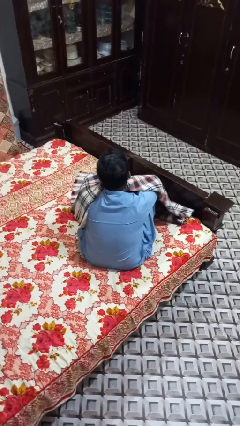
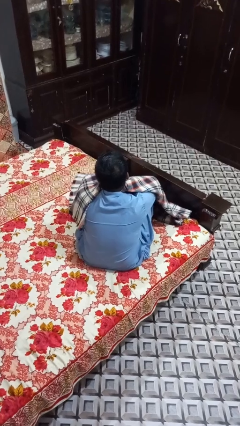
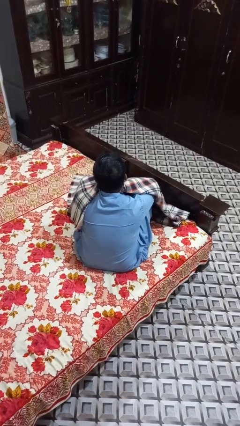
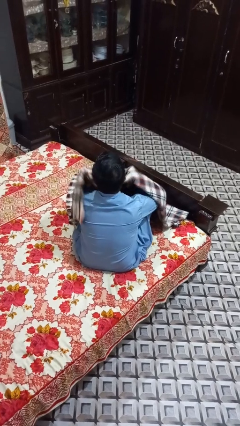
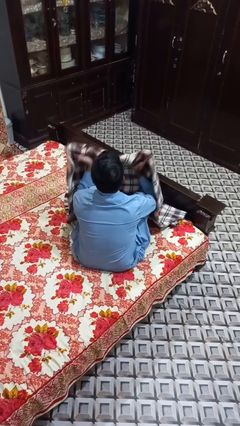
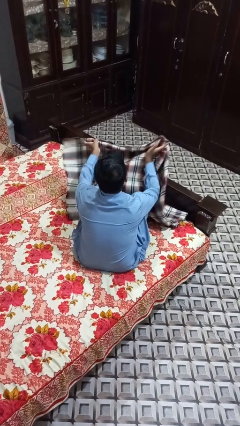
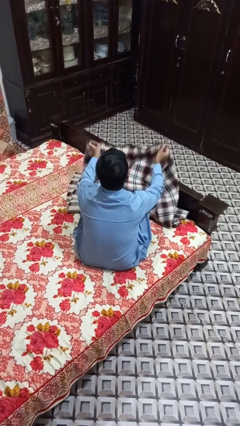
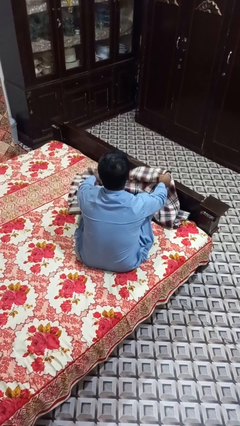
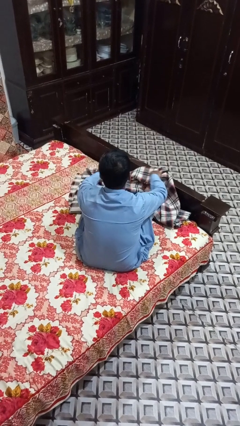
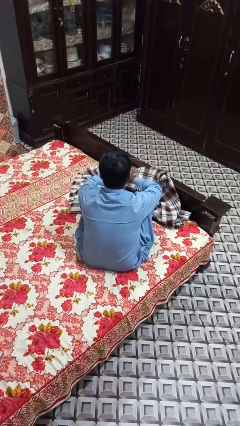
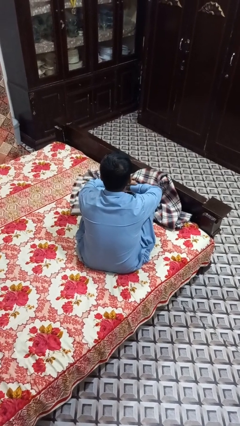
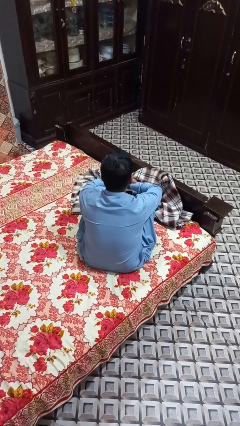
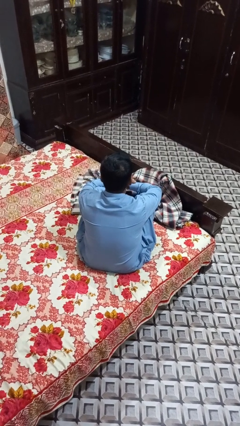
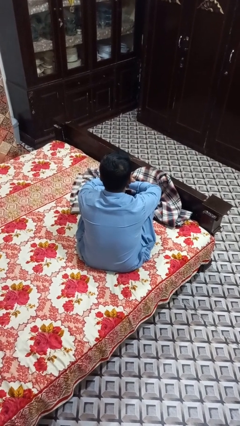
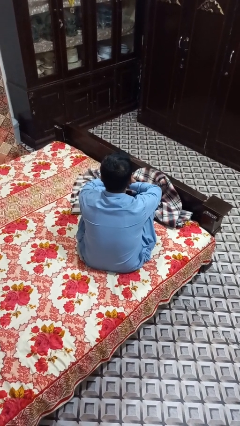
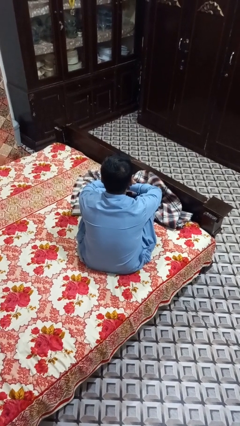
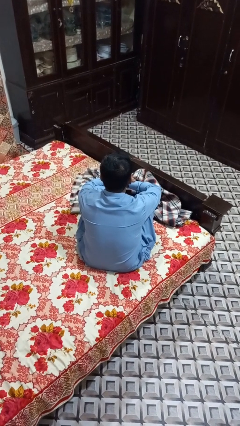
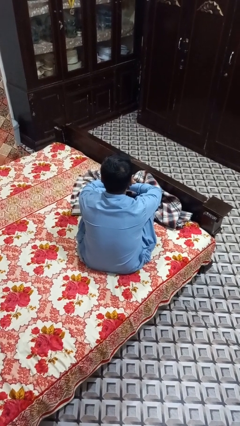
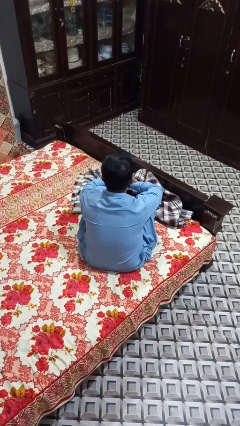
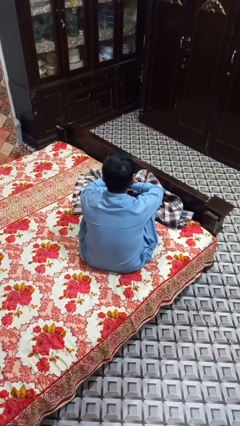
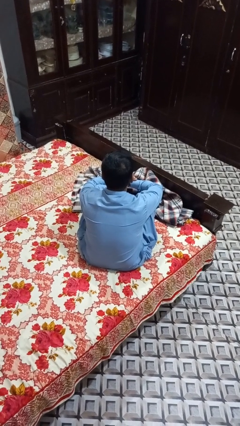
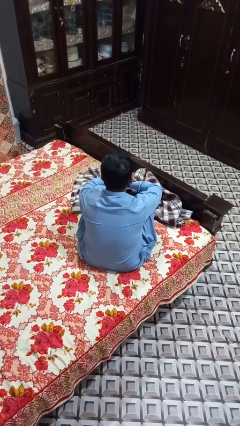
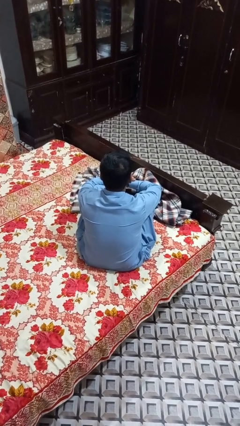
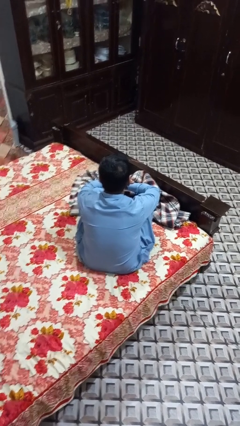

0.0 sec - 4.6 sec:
person uncovers with blanket

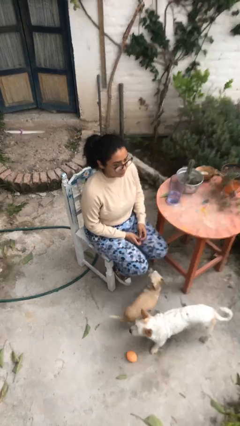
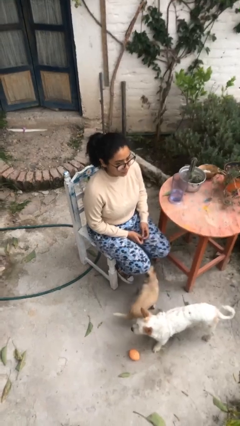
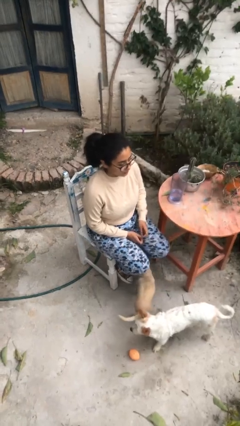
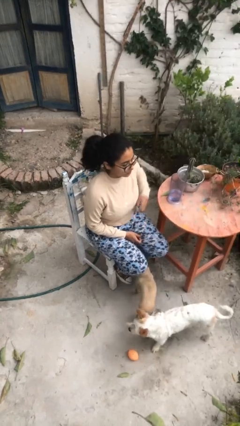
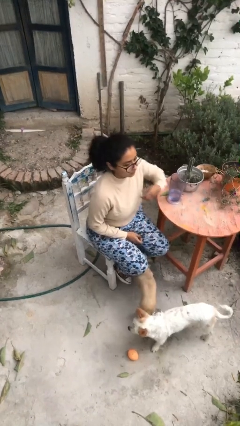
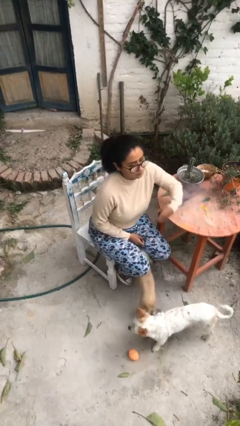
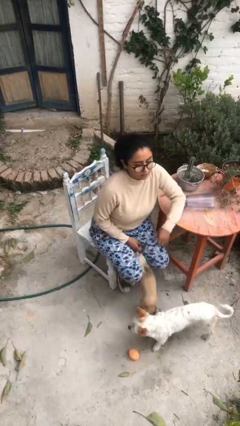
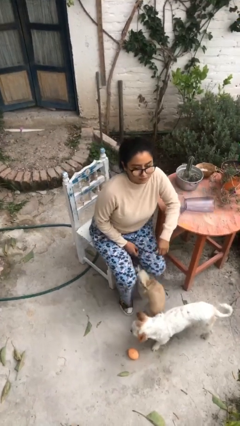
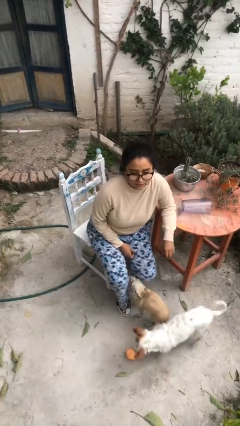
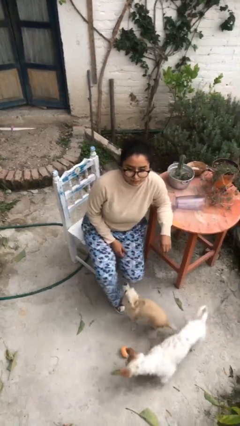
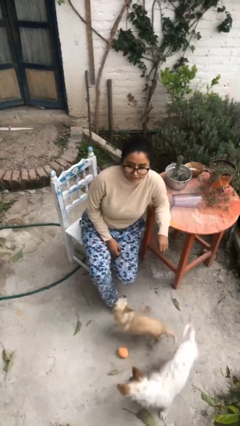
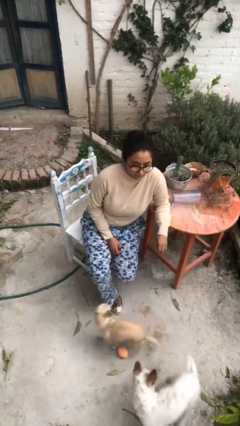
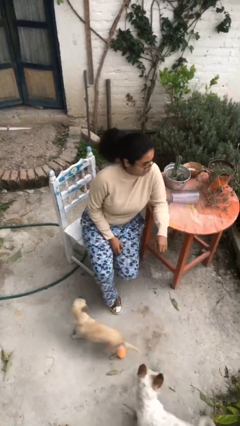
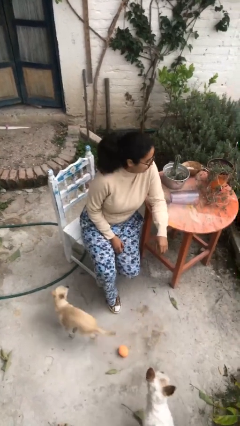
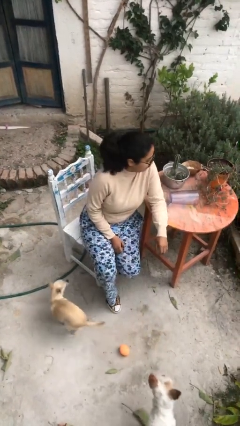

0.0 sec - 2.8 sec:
person spills on table

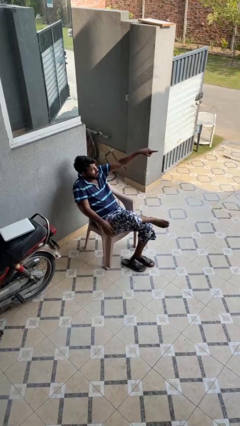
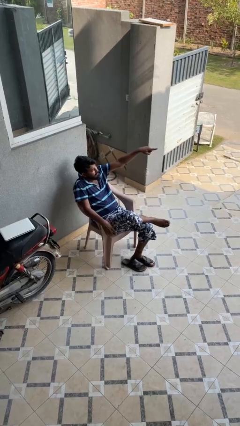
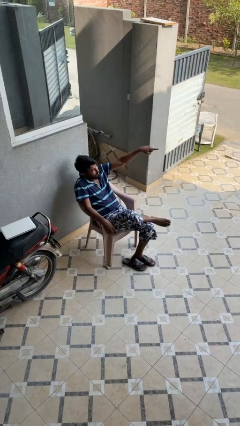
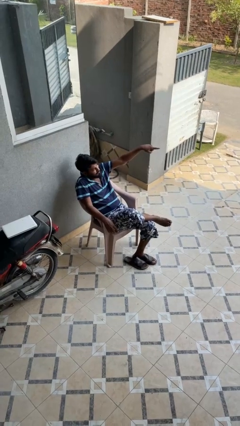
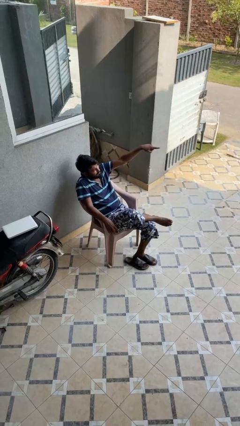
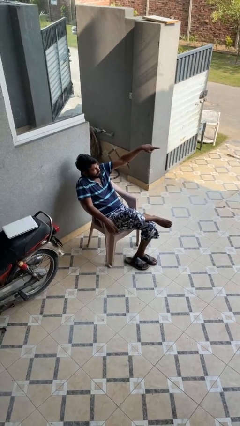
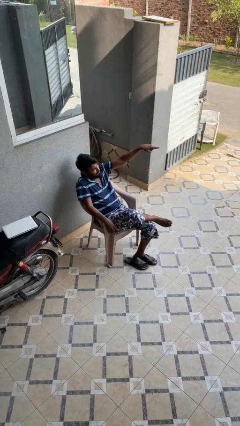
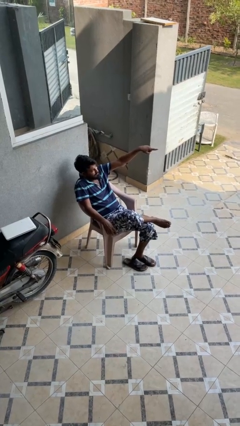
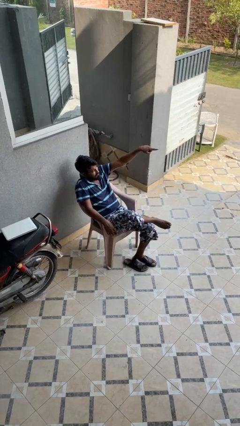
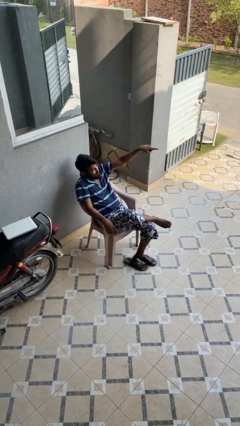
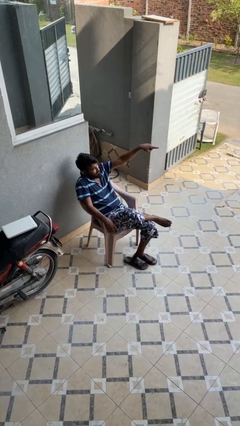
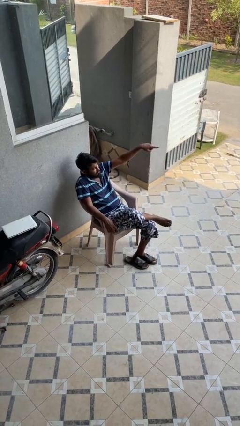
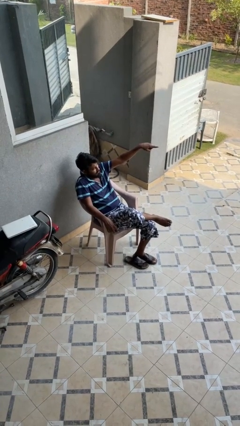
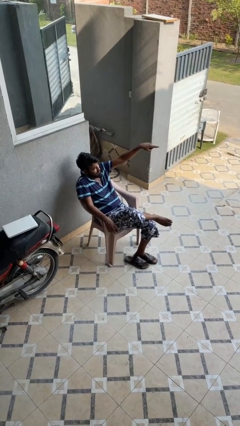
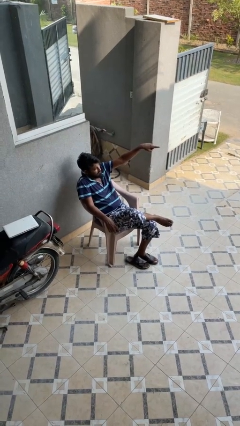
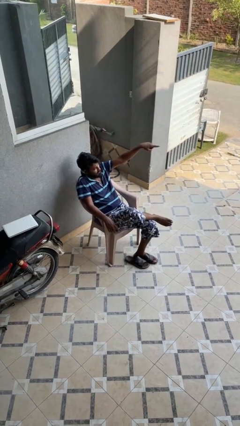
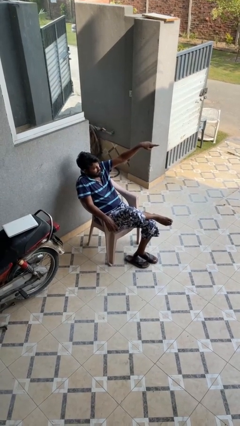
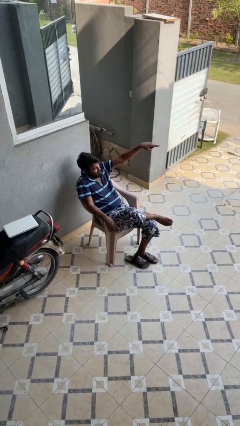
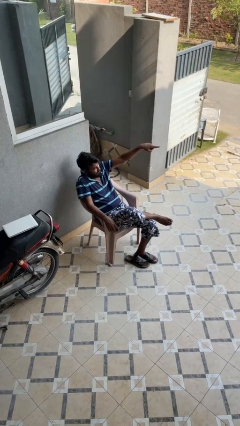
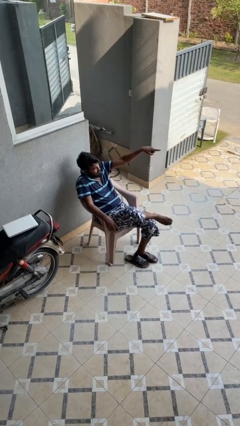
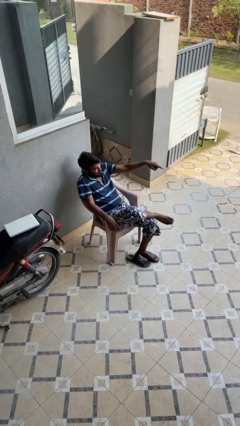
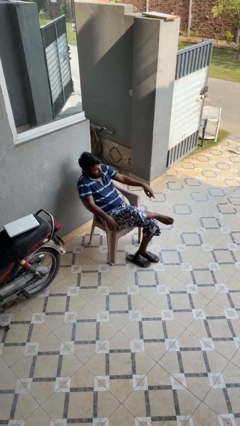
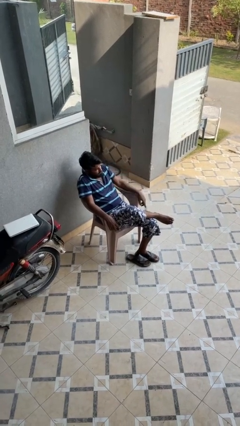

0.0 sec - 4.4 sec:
person points at person

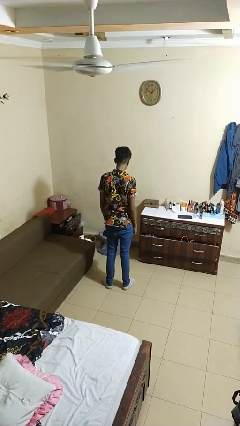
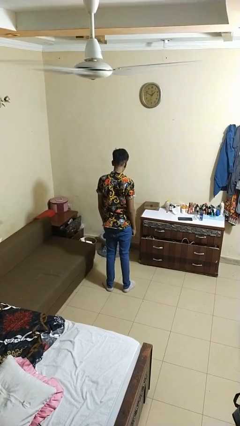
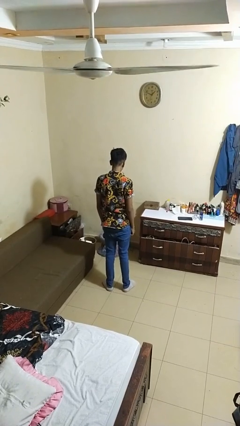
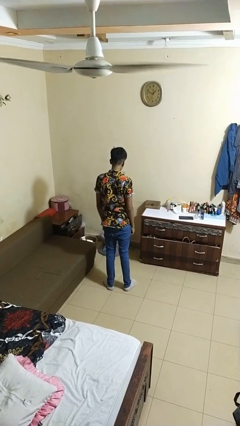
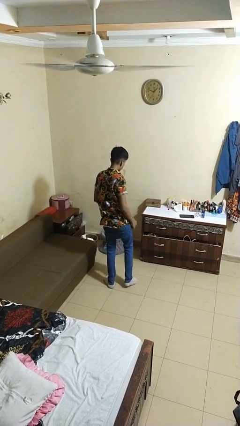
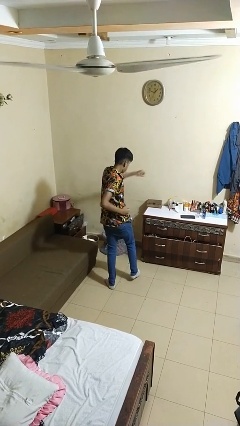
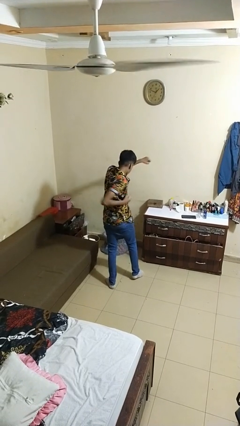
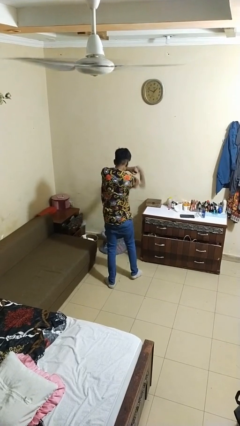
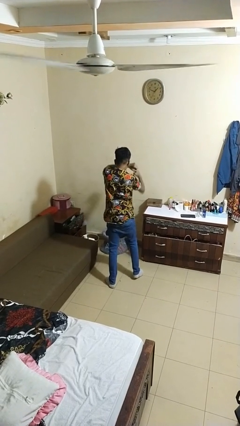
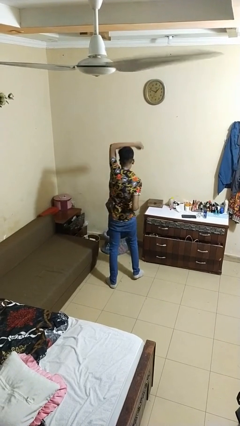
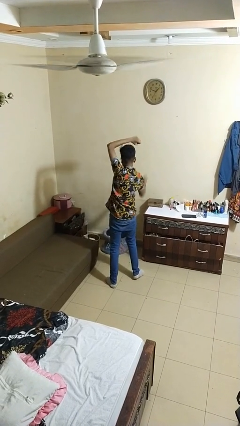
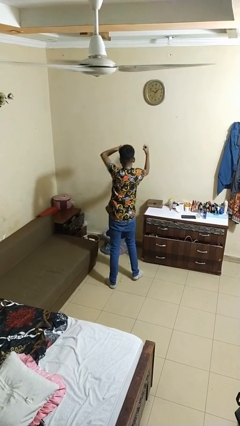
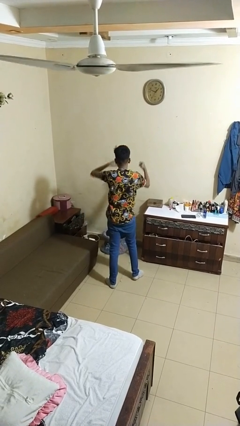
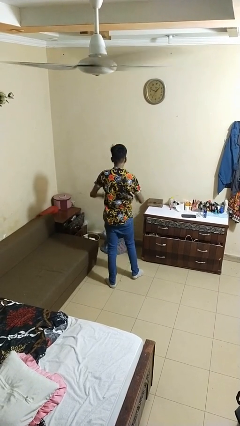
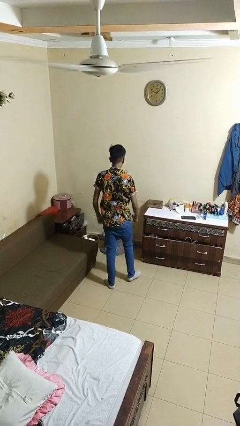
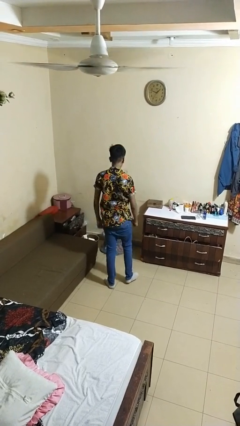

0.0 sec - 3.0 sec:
person punches

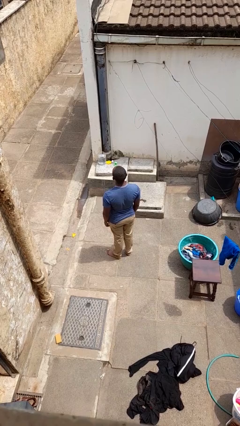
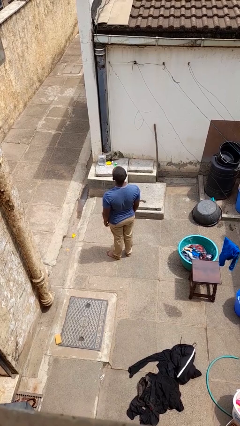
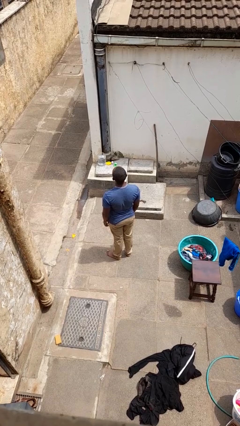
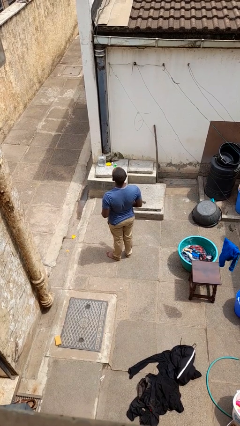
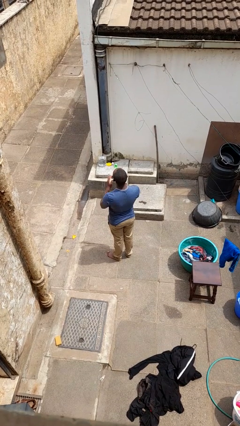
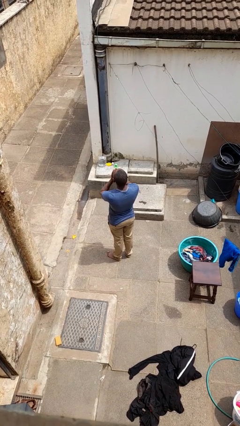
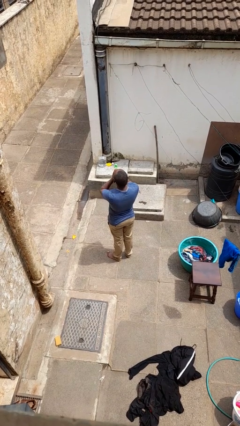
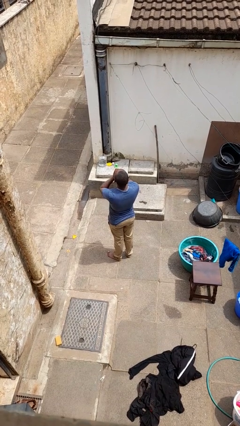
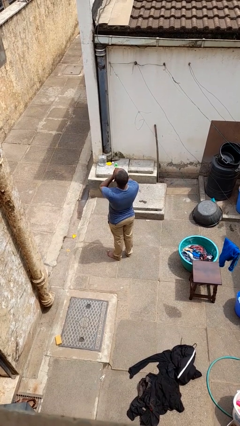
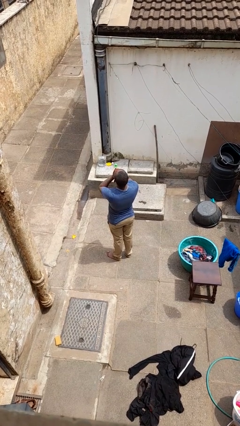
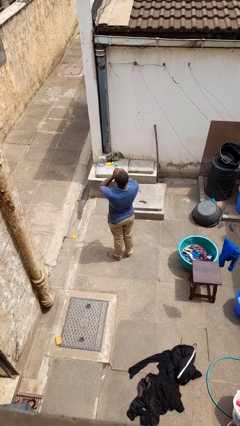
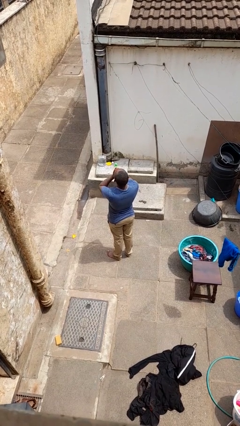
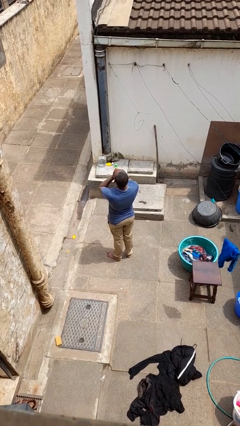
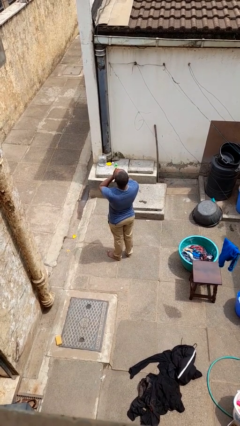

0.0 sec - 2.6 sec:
person yawns
